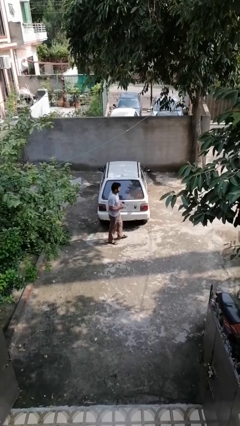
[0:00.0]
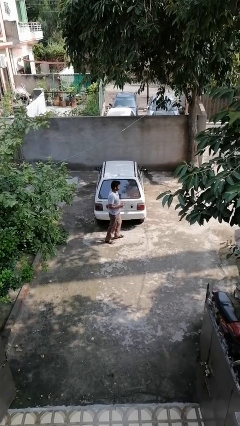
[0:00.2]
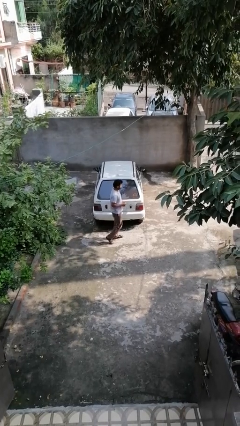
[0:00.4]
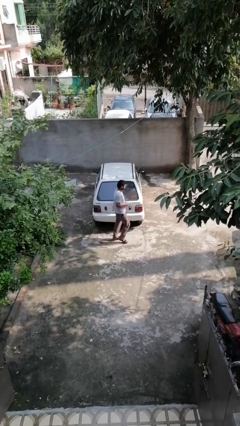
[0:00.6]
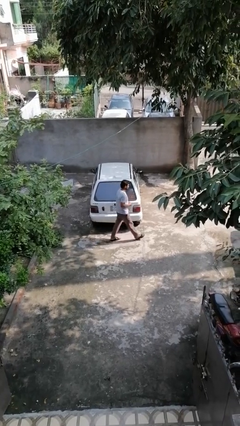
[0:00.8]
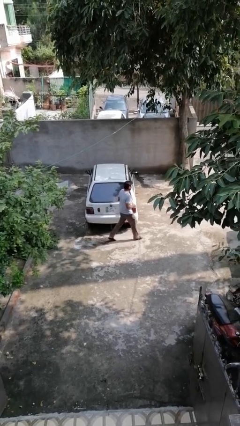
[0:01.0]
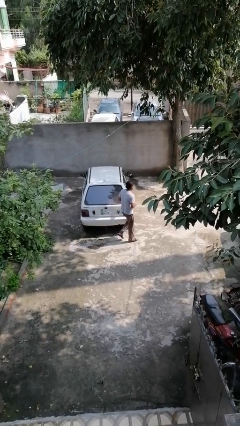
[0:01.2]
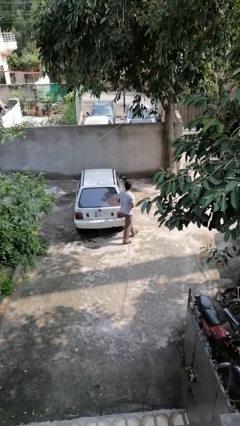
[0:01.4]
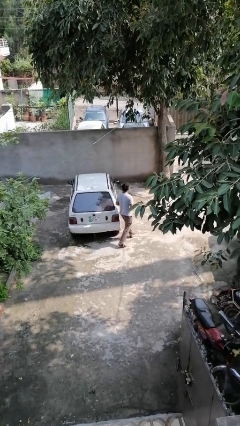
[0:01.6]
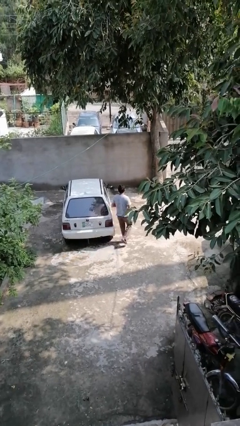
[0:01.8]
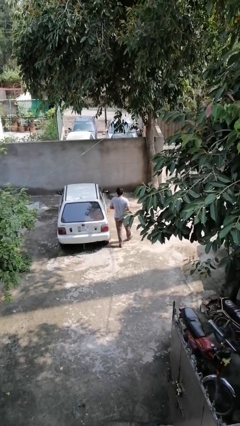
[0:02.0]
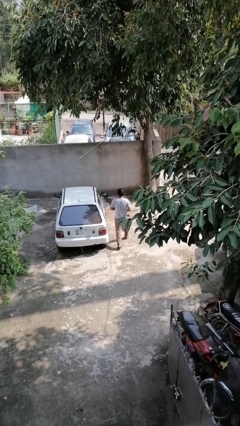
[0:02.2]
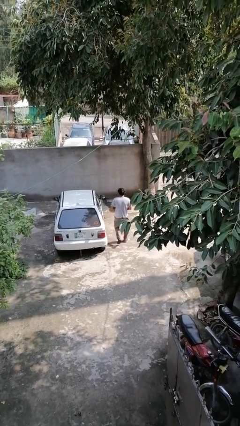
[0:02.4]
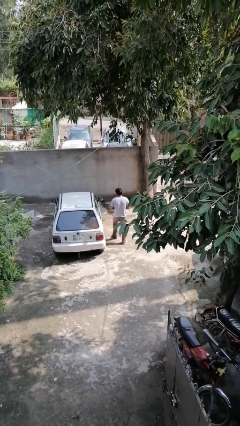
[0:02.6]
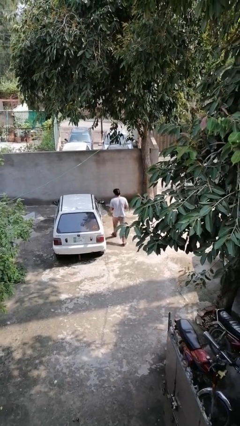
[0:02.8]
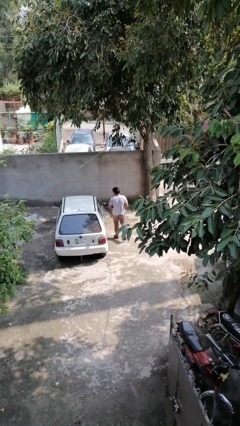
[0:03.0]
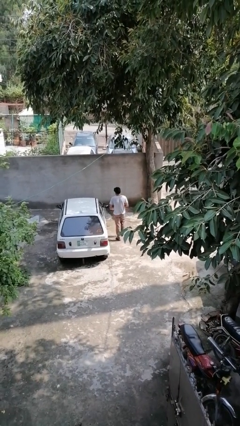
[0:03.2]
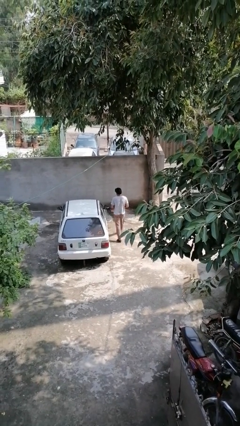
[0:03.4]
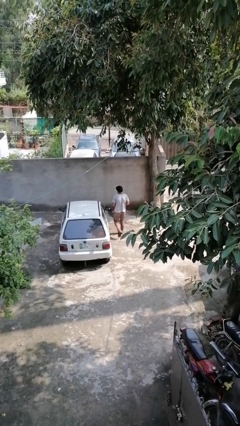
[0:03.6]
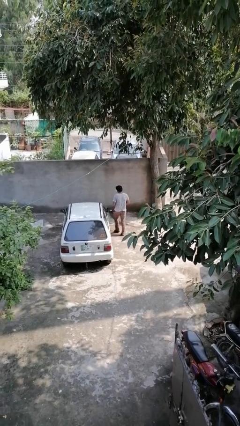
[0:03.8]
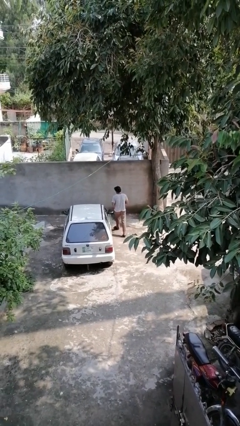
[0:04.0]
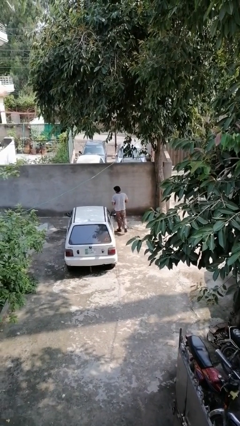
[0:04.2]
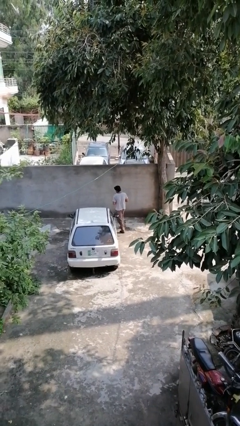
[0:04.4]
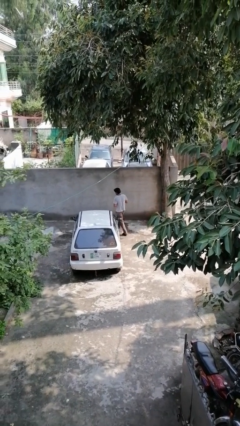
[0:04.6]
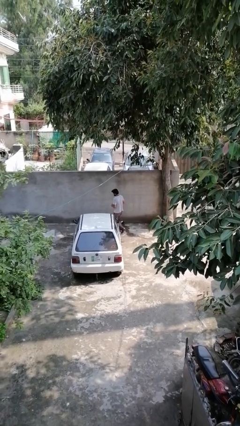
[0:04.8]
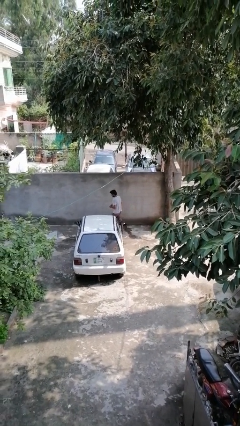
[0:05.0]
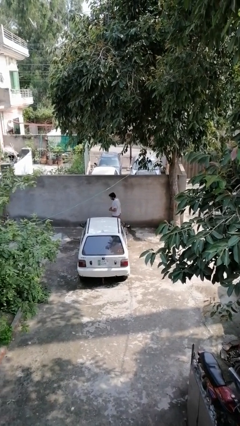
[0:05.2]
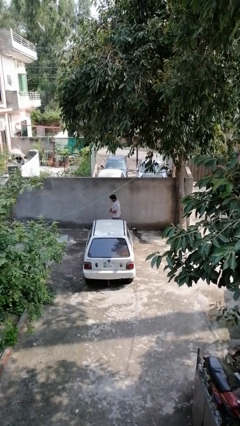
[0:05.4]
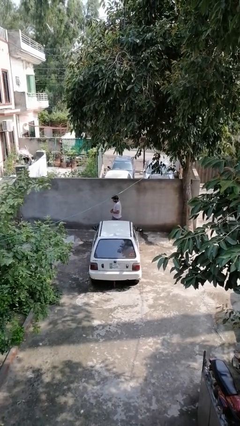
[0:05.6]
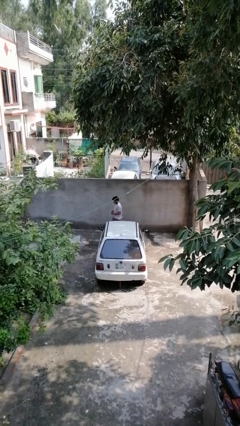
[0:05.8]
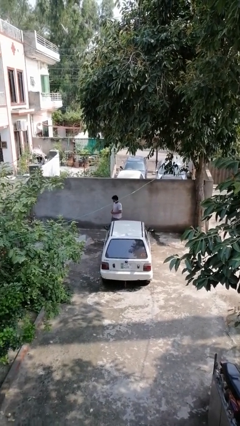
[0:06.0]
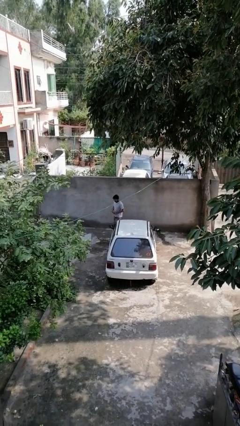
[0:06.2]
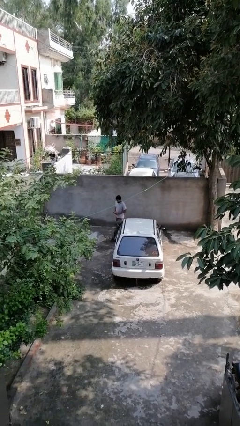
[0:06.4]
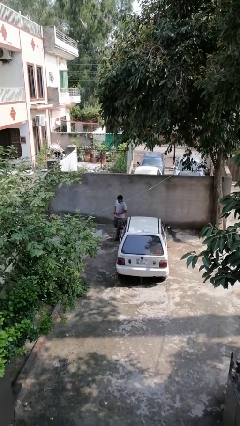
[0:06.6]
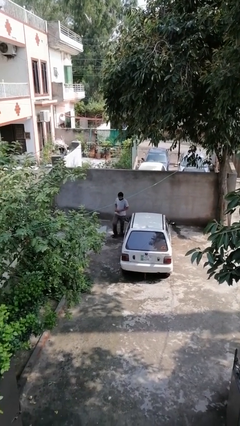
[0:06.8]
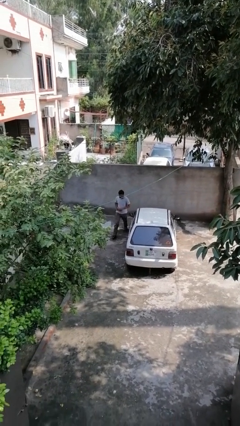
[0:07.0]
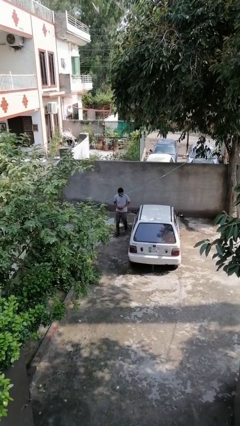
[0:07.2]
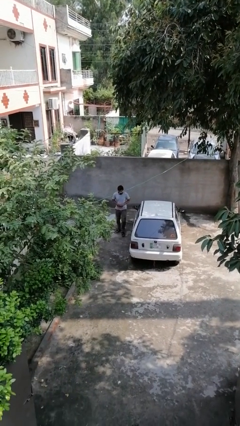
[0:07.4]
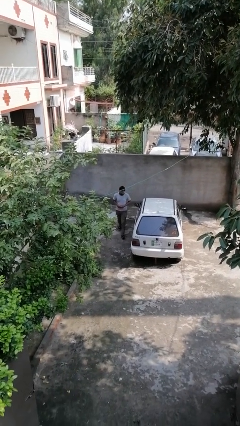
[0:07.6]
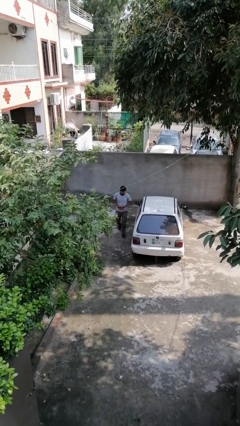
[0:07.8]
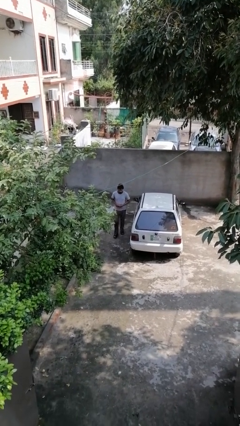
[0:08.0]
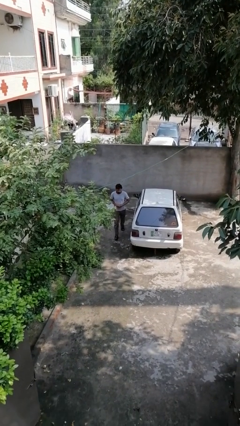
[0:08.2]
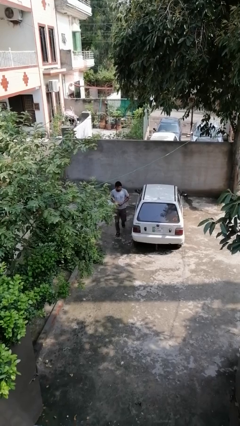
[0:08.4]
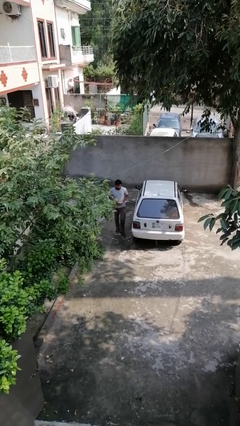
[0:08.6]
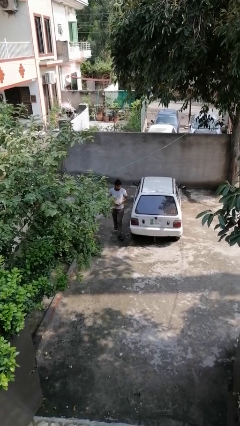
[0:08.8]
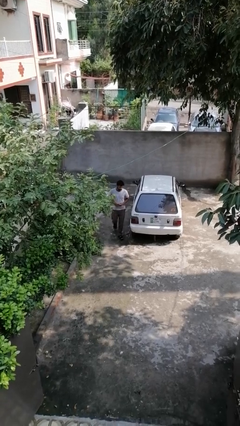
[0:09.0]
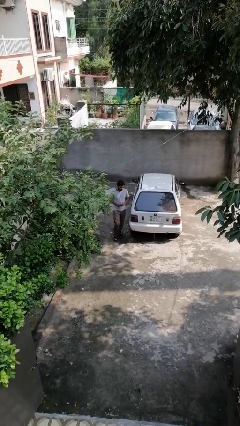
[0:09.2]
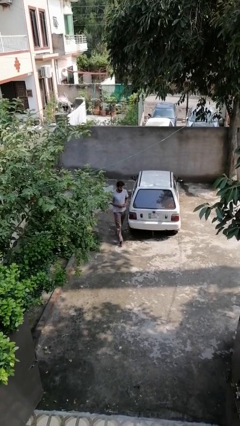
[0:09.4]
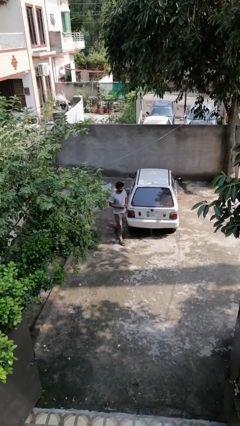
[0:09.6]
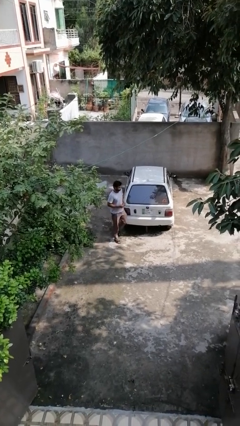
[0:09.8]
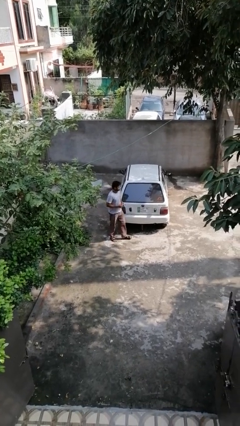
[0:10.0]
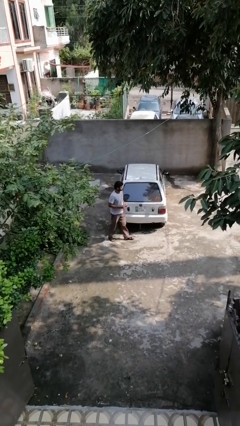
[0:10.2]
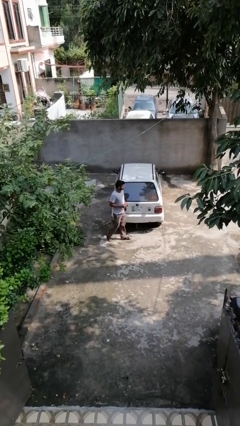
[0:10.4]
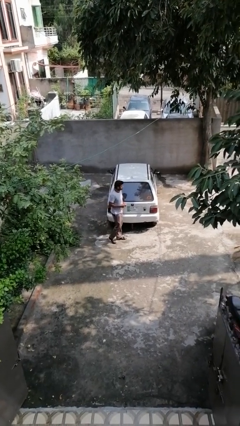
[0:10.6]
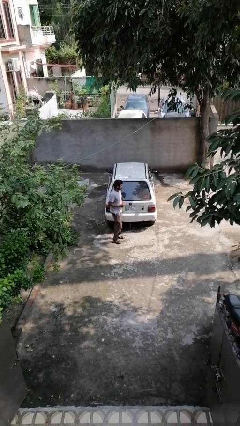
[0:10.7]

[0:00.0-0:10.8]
person walks around car

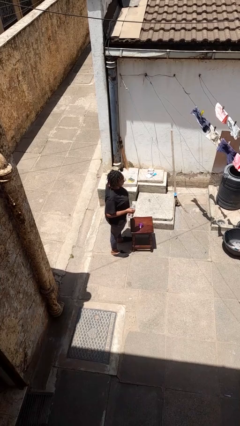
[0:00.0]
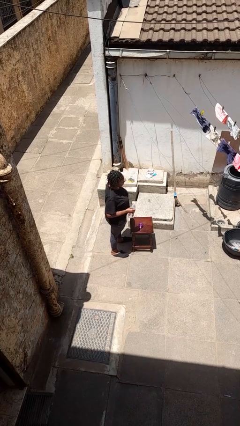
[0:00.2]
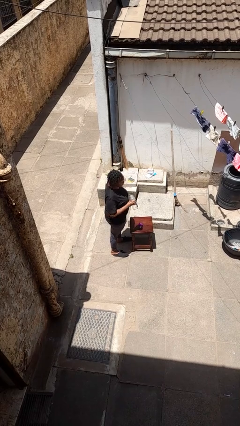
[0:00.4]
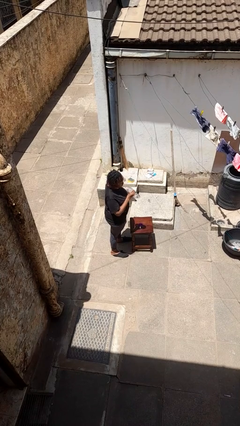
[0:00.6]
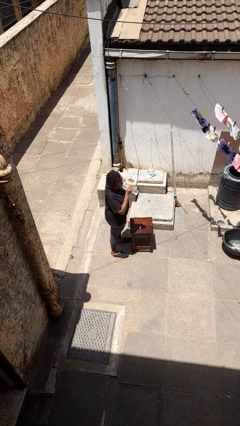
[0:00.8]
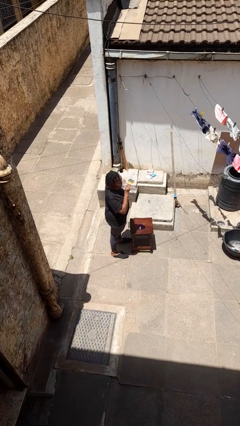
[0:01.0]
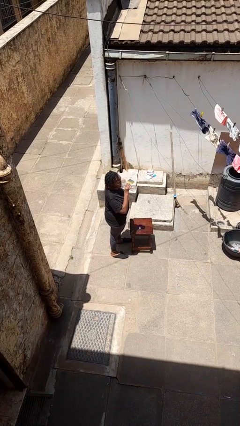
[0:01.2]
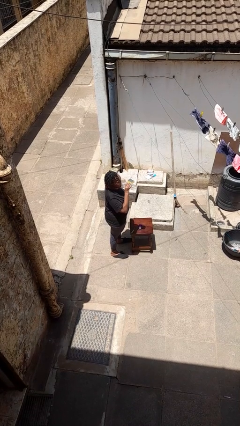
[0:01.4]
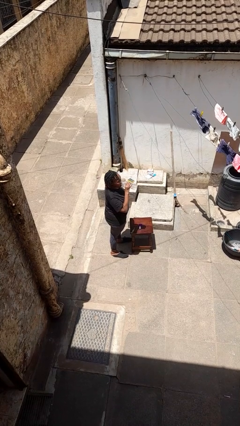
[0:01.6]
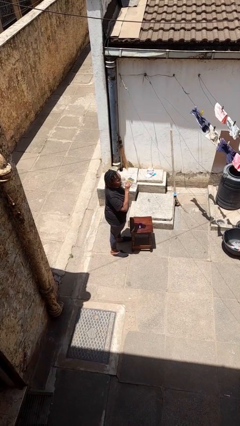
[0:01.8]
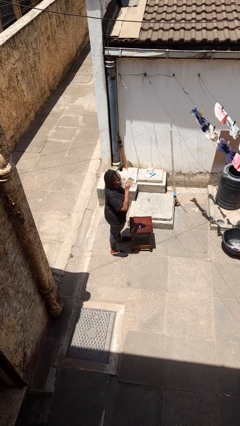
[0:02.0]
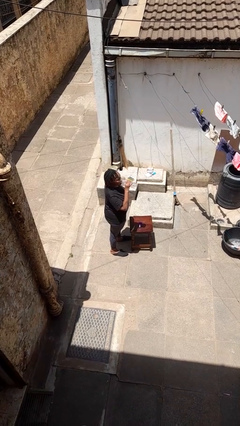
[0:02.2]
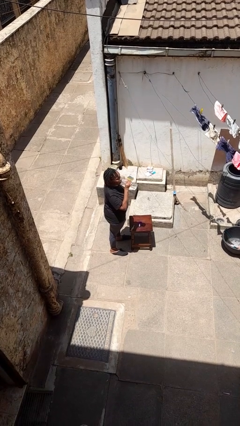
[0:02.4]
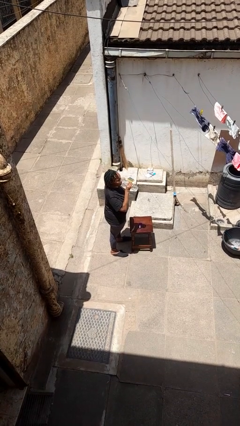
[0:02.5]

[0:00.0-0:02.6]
person drinks from bottle

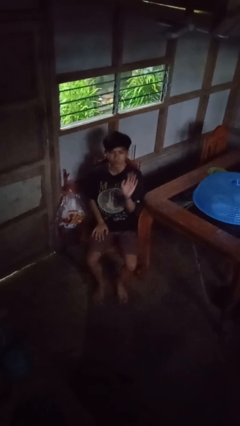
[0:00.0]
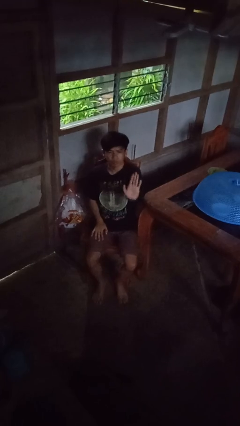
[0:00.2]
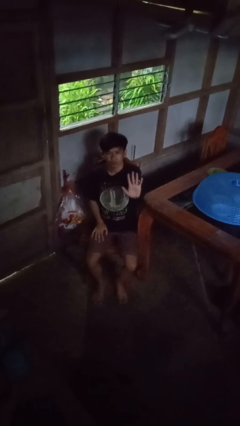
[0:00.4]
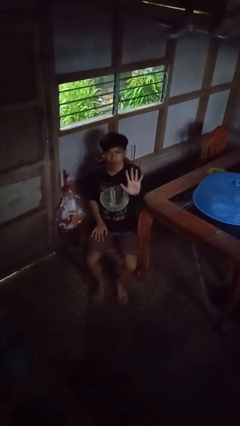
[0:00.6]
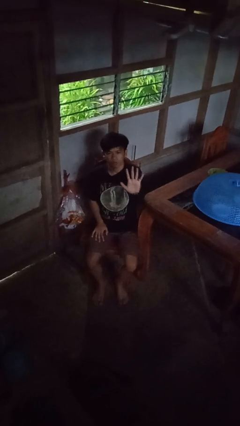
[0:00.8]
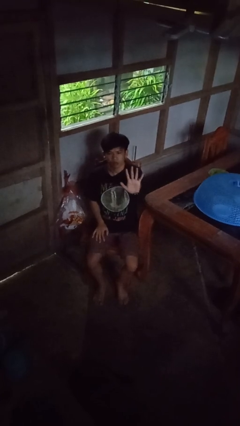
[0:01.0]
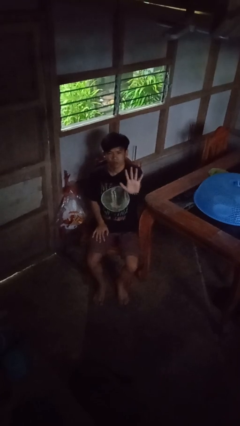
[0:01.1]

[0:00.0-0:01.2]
person gestures number five

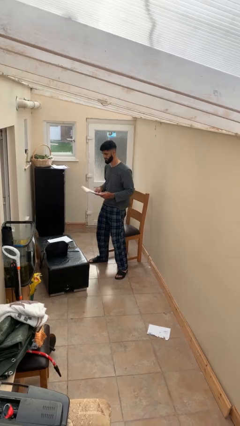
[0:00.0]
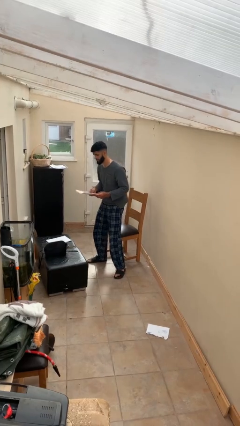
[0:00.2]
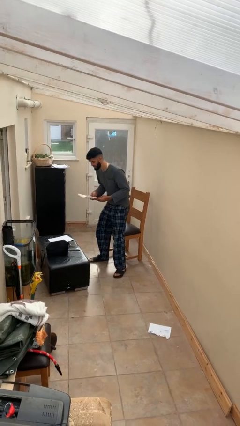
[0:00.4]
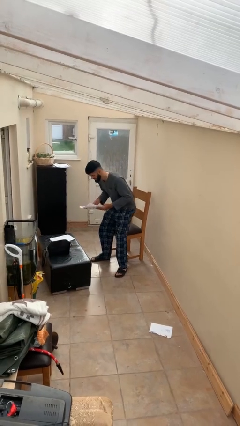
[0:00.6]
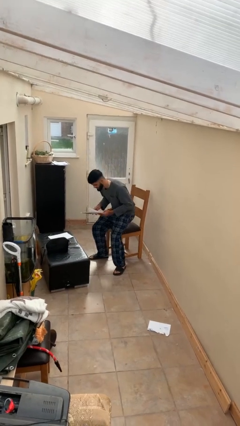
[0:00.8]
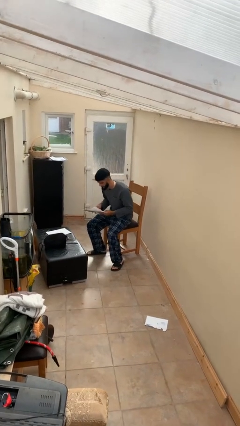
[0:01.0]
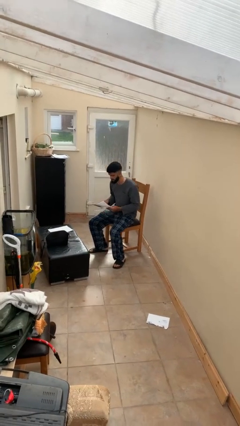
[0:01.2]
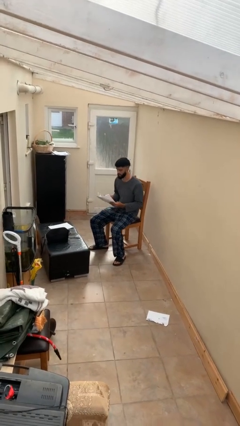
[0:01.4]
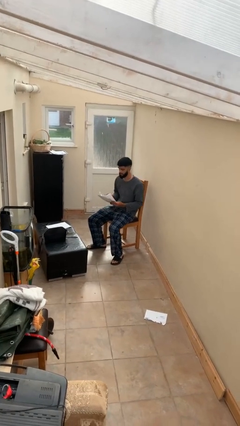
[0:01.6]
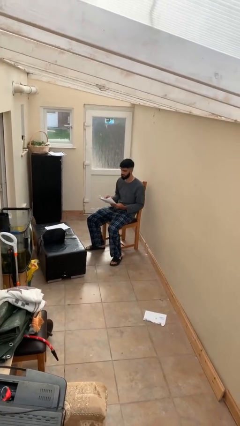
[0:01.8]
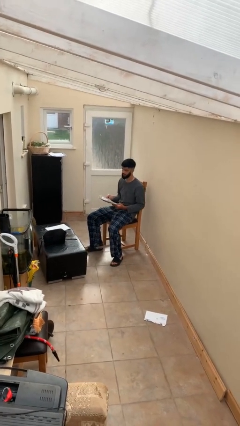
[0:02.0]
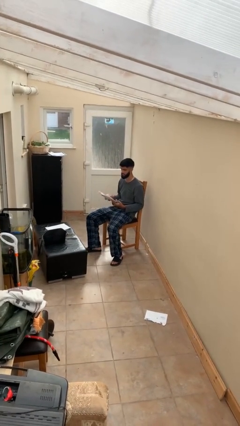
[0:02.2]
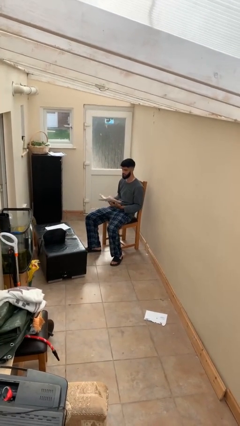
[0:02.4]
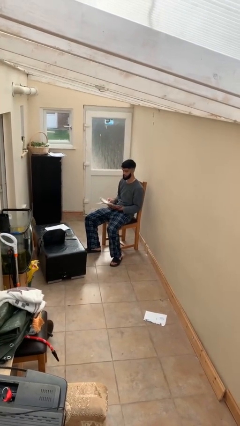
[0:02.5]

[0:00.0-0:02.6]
person sits down

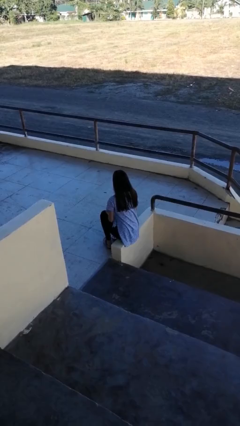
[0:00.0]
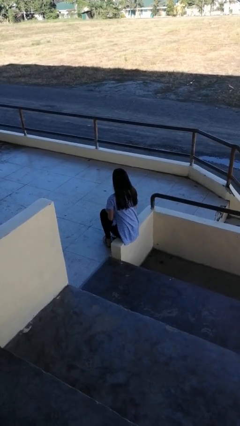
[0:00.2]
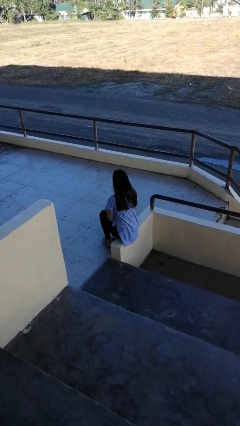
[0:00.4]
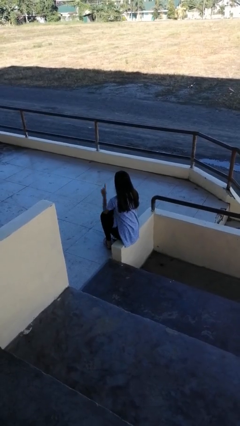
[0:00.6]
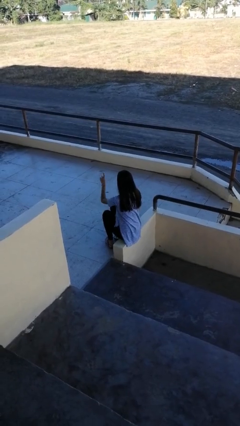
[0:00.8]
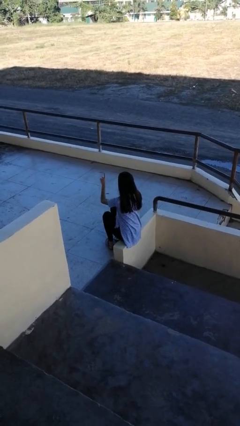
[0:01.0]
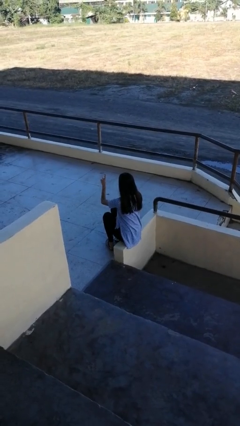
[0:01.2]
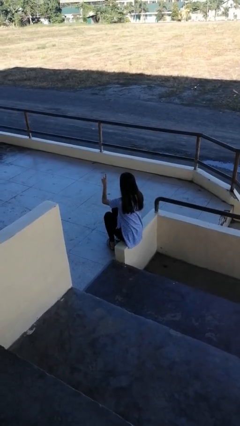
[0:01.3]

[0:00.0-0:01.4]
person gestures number one
